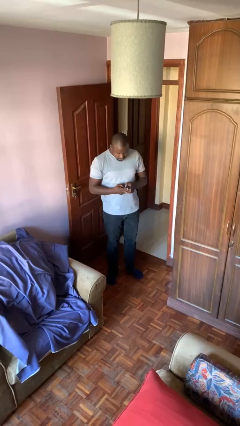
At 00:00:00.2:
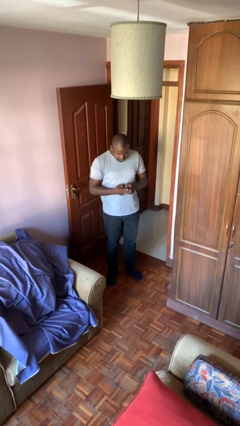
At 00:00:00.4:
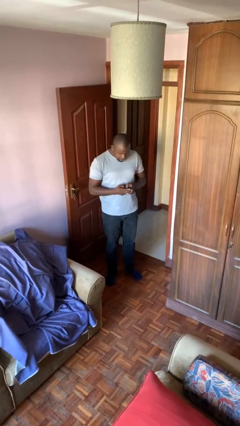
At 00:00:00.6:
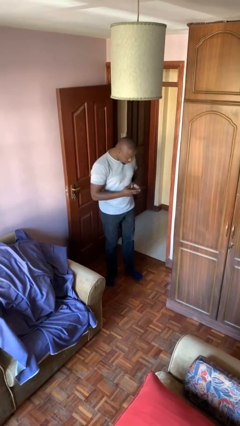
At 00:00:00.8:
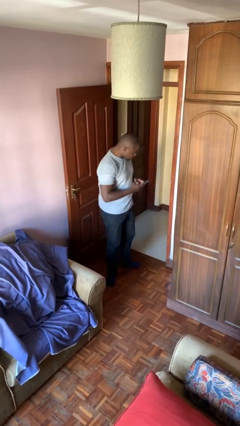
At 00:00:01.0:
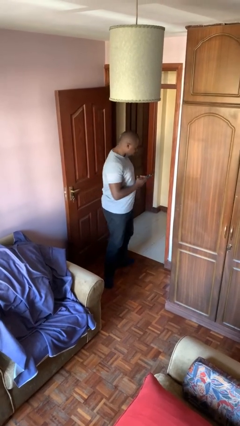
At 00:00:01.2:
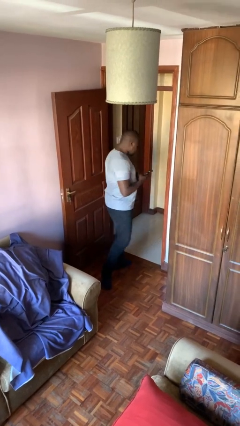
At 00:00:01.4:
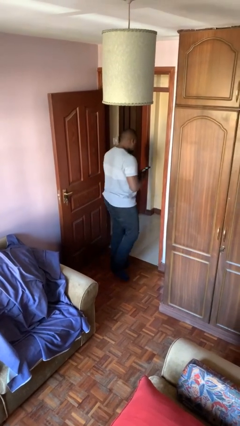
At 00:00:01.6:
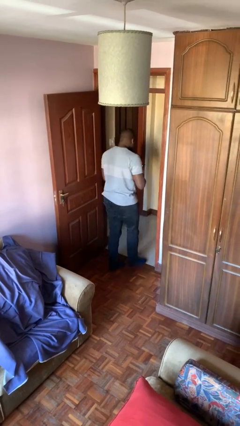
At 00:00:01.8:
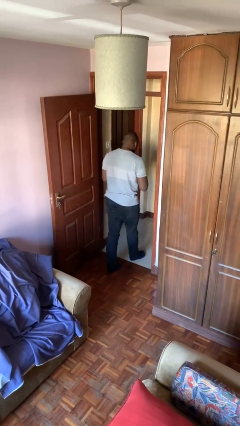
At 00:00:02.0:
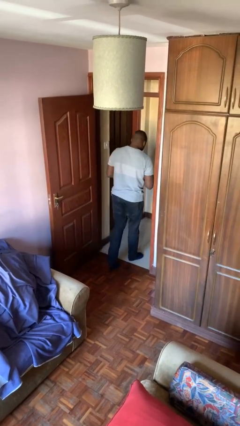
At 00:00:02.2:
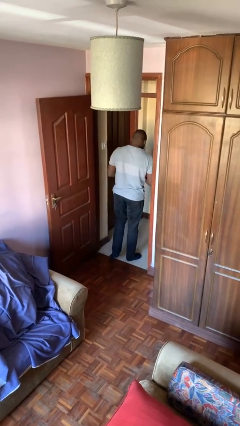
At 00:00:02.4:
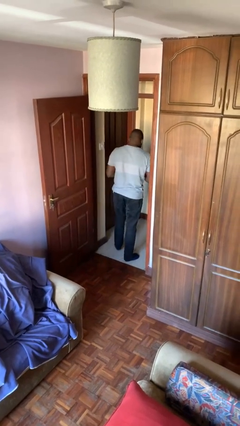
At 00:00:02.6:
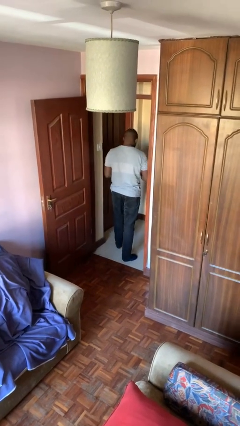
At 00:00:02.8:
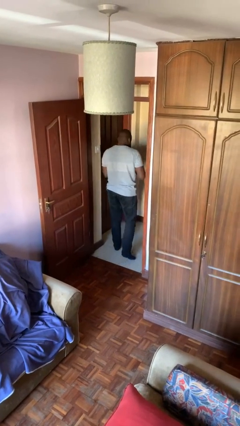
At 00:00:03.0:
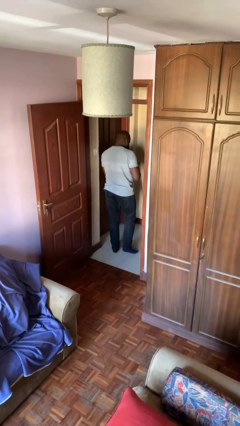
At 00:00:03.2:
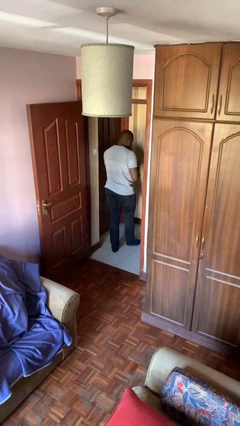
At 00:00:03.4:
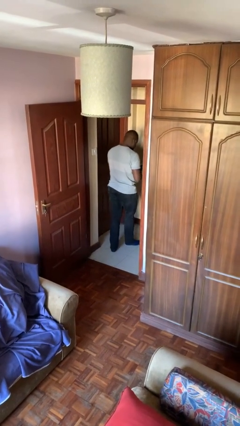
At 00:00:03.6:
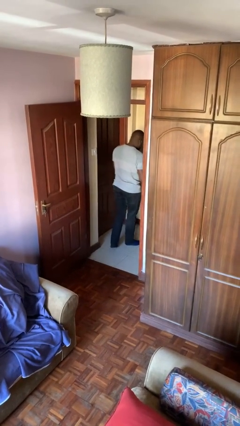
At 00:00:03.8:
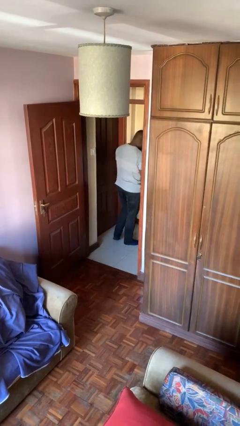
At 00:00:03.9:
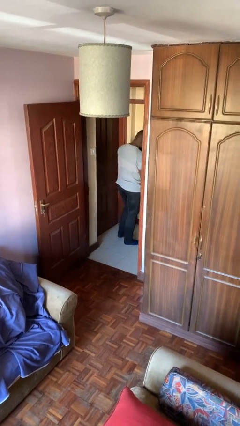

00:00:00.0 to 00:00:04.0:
person exits scene through structure

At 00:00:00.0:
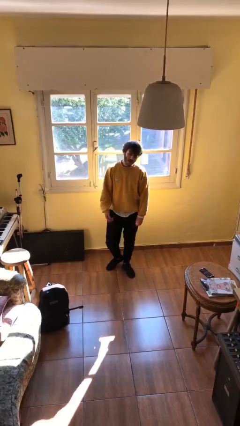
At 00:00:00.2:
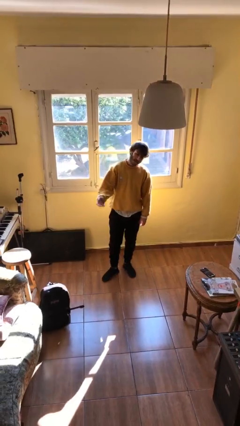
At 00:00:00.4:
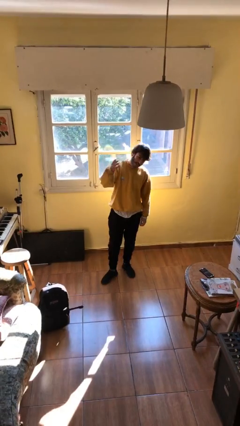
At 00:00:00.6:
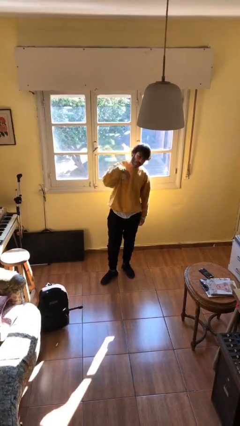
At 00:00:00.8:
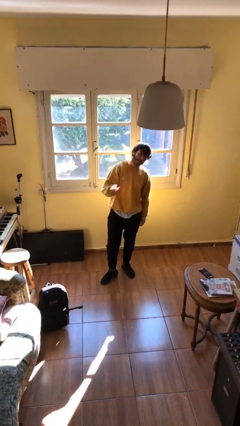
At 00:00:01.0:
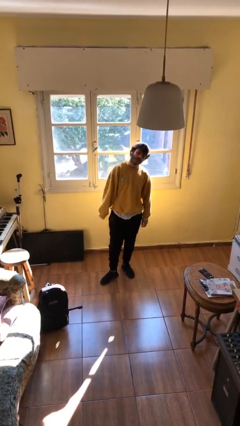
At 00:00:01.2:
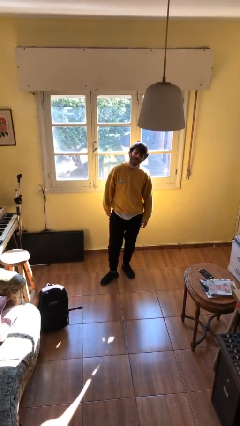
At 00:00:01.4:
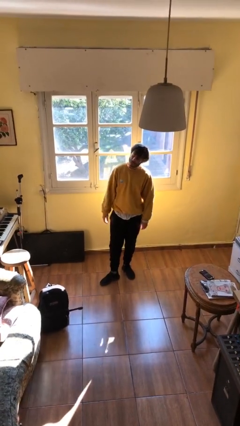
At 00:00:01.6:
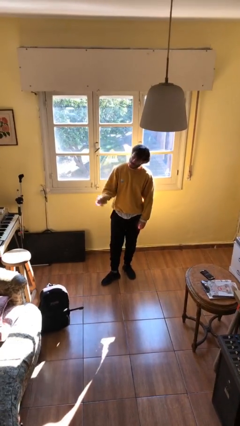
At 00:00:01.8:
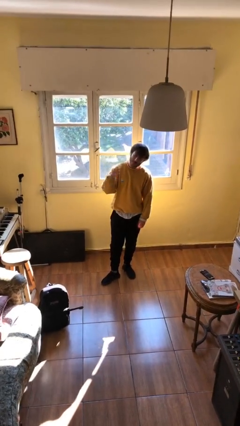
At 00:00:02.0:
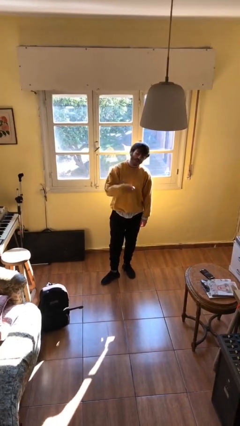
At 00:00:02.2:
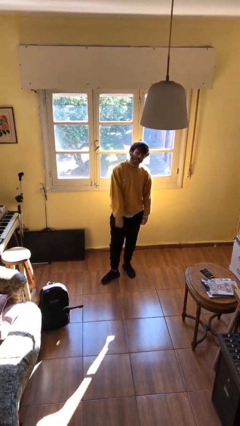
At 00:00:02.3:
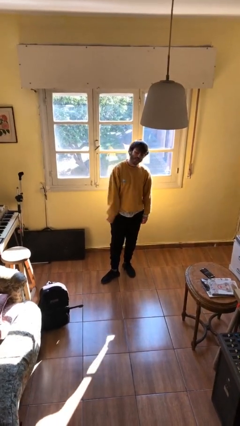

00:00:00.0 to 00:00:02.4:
person gestures come here

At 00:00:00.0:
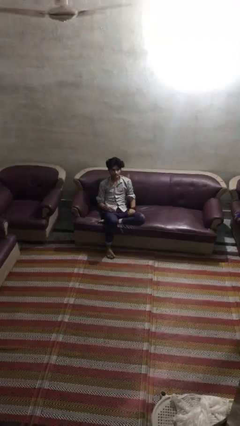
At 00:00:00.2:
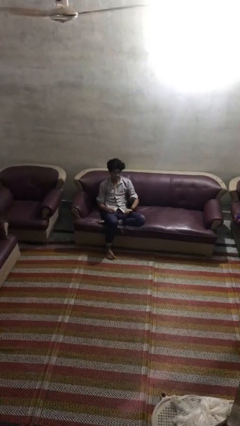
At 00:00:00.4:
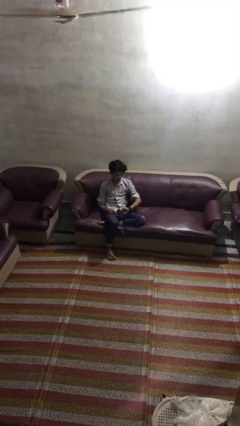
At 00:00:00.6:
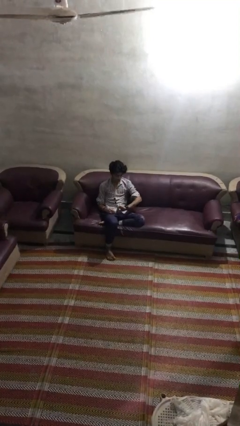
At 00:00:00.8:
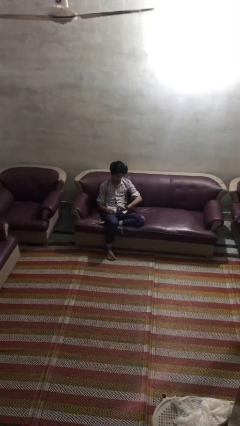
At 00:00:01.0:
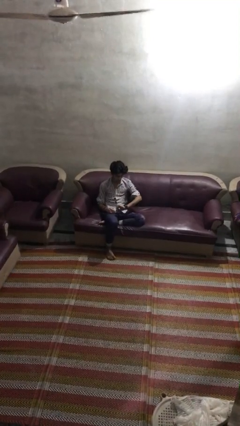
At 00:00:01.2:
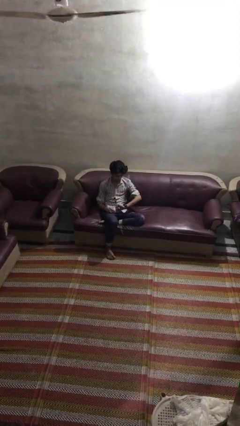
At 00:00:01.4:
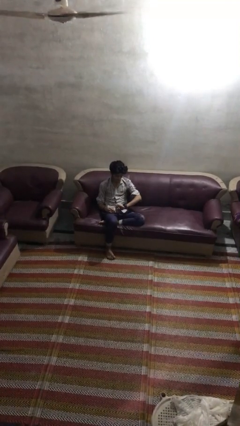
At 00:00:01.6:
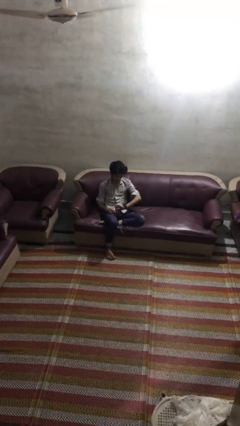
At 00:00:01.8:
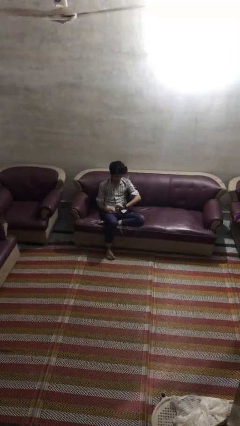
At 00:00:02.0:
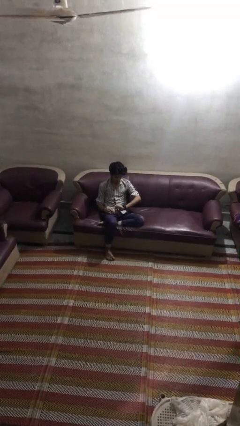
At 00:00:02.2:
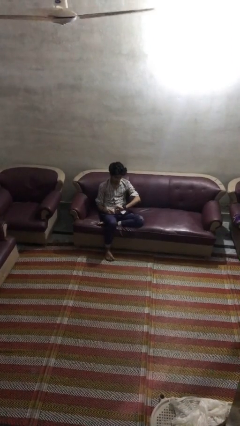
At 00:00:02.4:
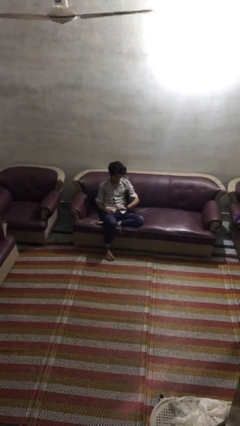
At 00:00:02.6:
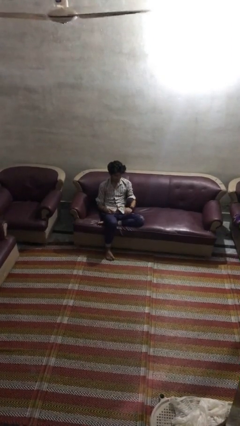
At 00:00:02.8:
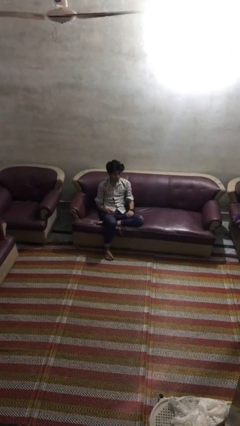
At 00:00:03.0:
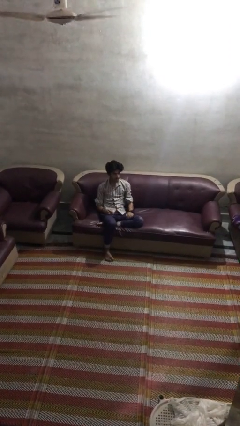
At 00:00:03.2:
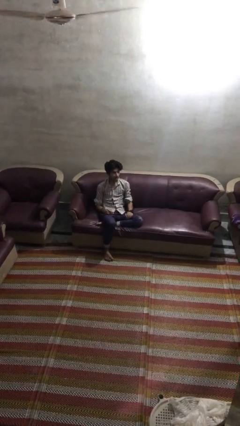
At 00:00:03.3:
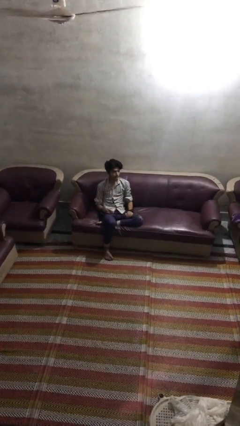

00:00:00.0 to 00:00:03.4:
person looks at wristwatch

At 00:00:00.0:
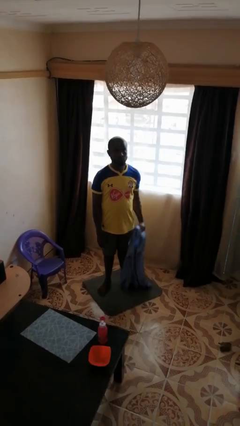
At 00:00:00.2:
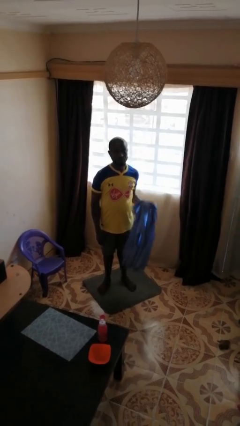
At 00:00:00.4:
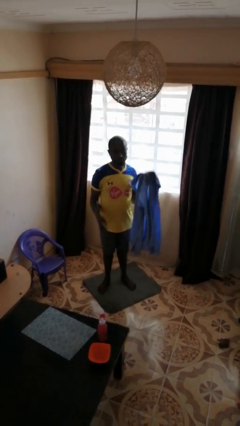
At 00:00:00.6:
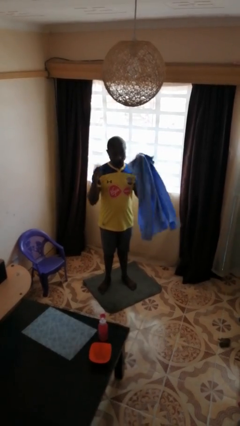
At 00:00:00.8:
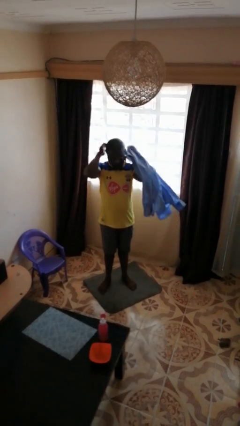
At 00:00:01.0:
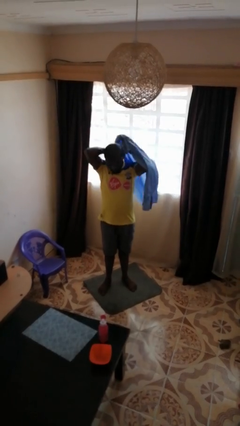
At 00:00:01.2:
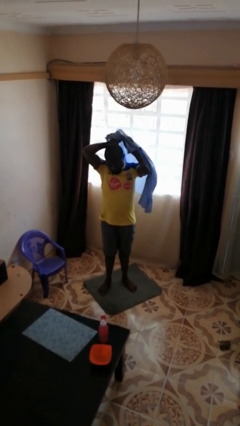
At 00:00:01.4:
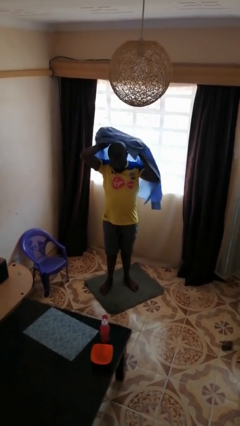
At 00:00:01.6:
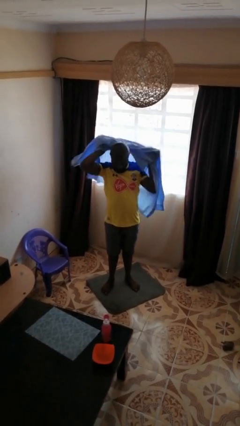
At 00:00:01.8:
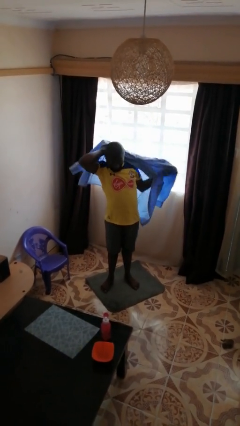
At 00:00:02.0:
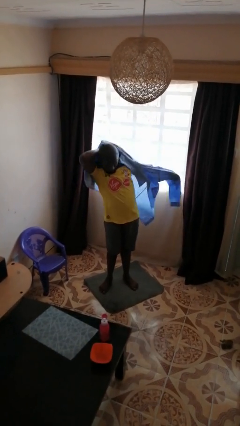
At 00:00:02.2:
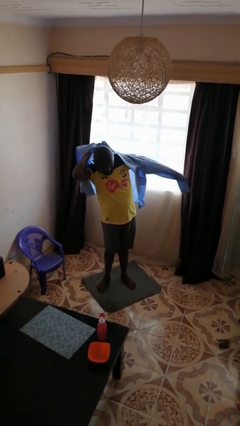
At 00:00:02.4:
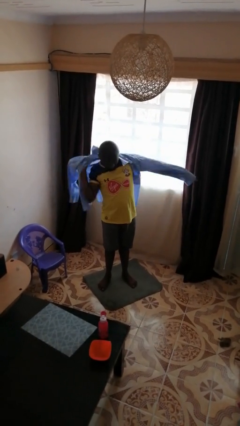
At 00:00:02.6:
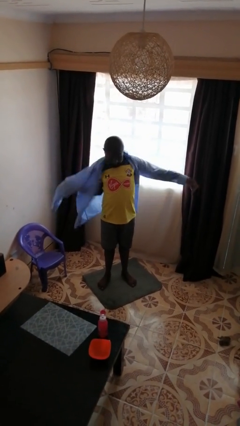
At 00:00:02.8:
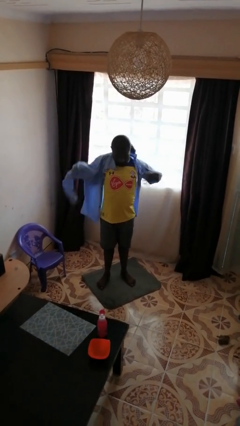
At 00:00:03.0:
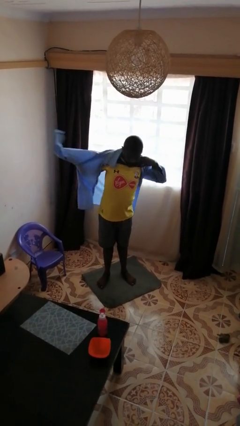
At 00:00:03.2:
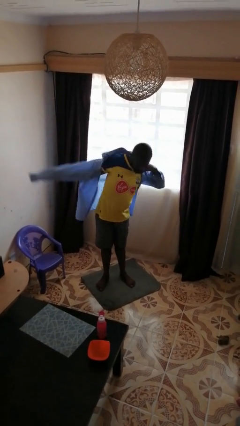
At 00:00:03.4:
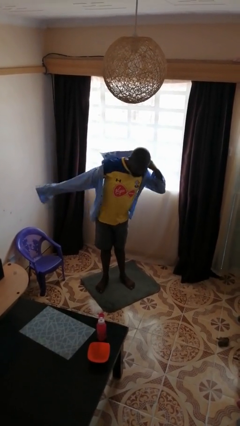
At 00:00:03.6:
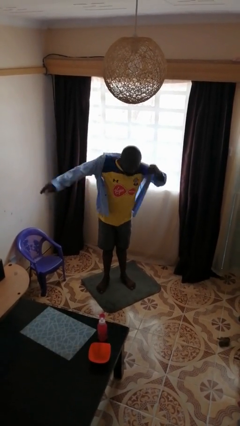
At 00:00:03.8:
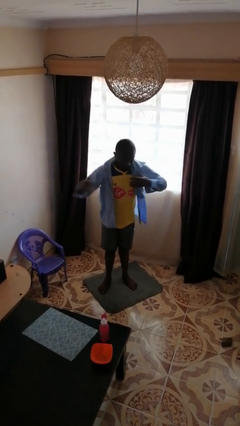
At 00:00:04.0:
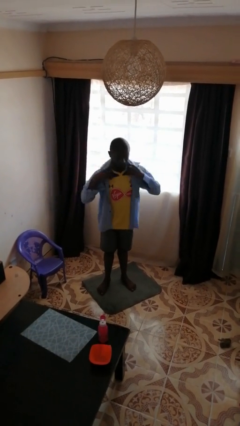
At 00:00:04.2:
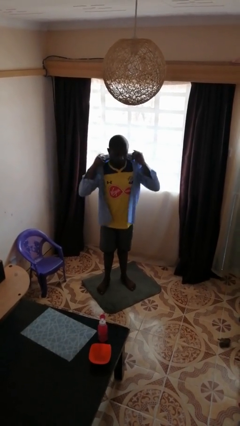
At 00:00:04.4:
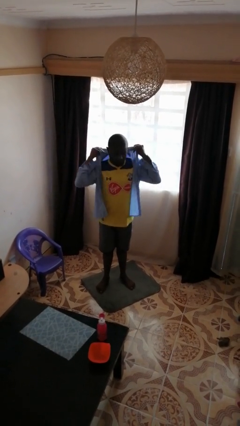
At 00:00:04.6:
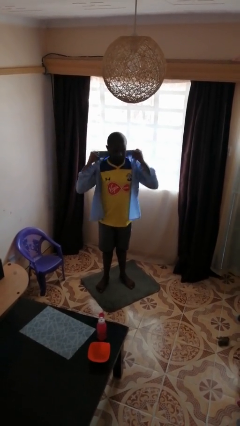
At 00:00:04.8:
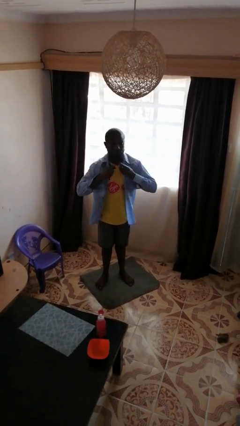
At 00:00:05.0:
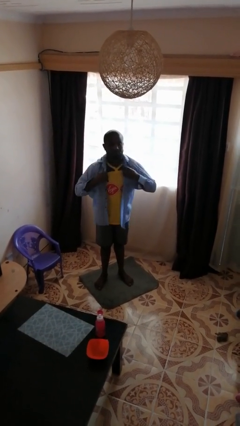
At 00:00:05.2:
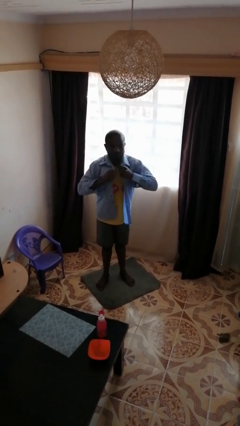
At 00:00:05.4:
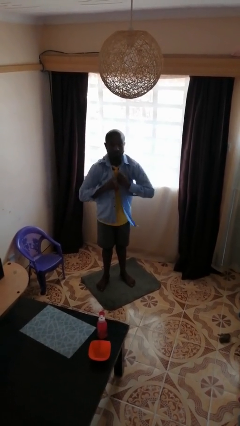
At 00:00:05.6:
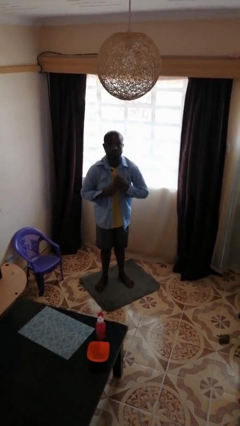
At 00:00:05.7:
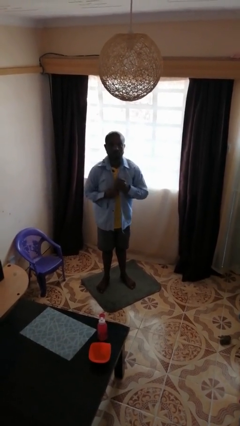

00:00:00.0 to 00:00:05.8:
person puts on shirt

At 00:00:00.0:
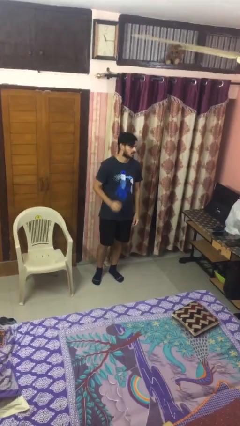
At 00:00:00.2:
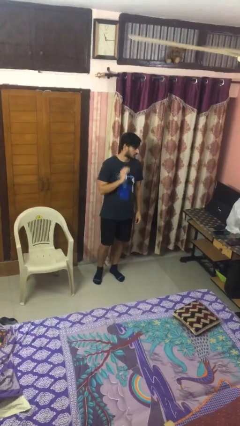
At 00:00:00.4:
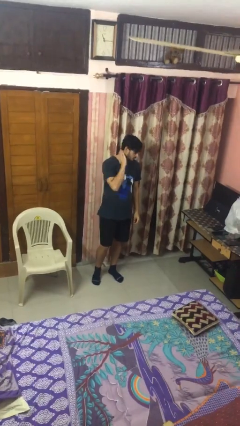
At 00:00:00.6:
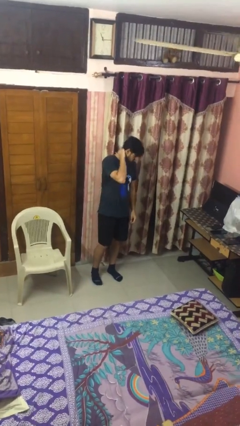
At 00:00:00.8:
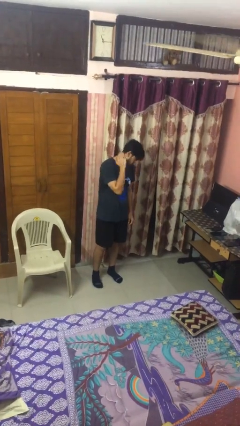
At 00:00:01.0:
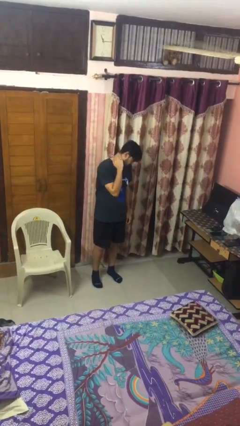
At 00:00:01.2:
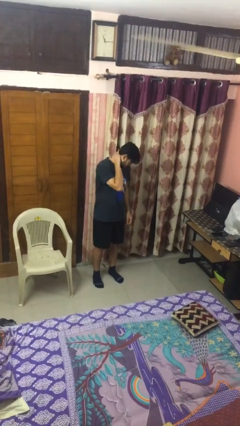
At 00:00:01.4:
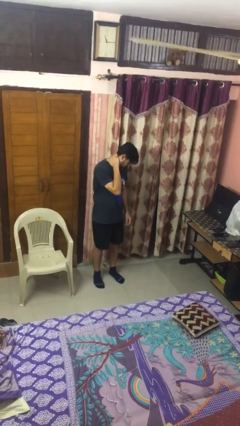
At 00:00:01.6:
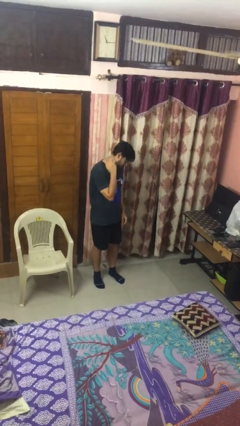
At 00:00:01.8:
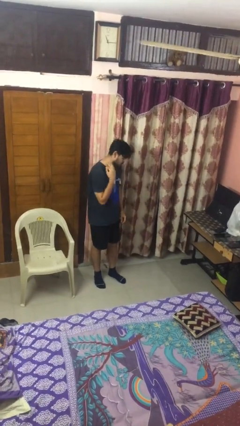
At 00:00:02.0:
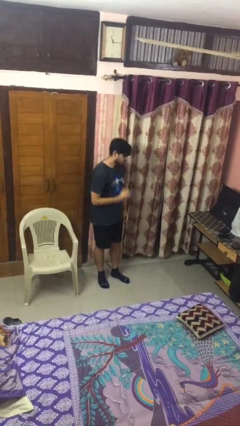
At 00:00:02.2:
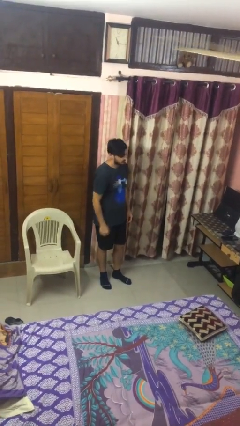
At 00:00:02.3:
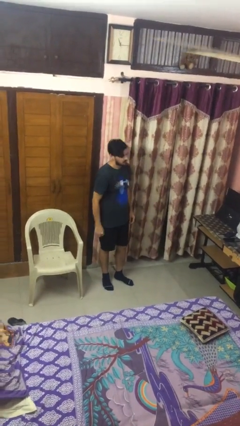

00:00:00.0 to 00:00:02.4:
person rubs neck
